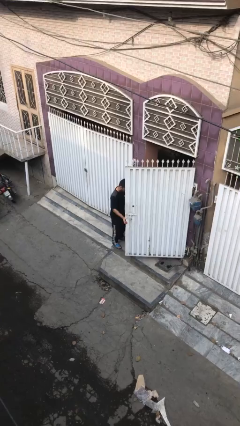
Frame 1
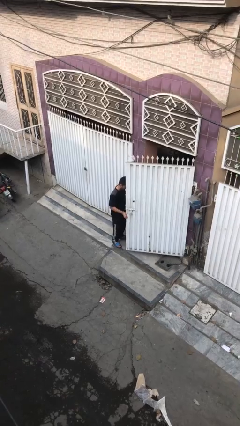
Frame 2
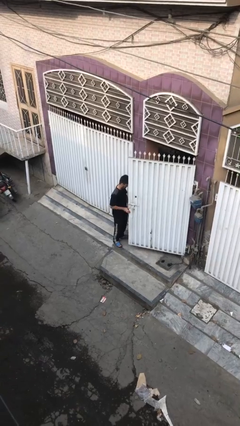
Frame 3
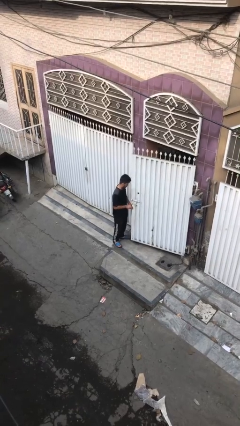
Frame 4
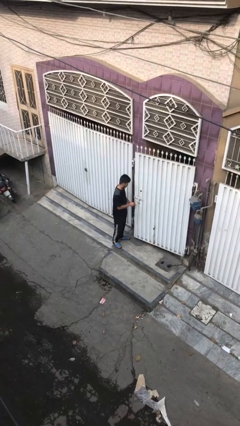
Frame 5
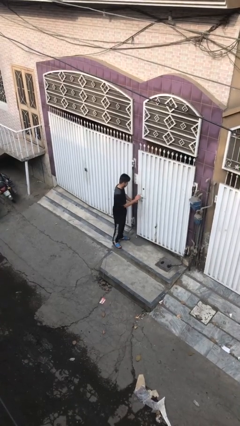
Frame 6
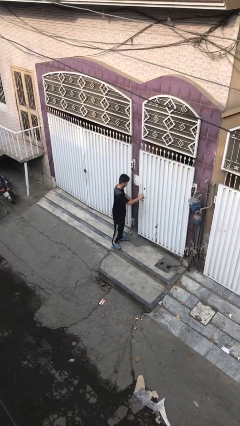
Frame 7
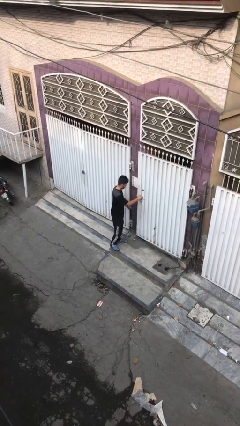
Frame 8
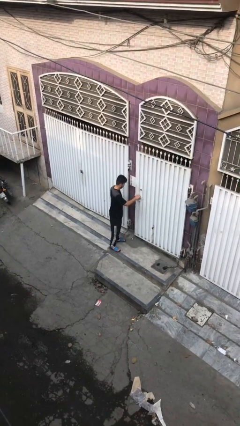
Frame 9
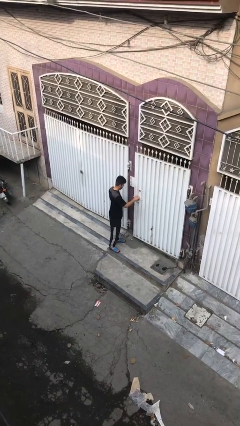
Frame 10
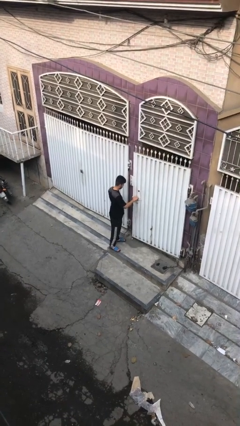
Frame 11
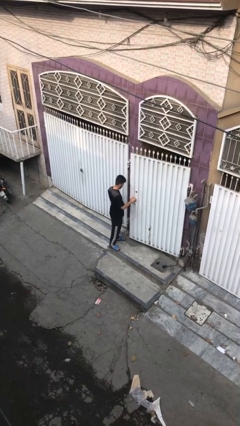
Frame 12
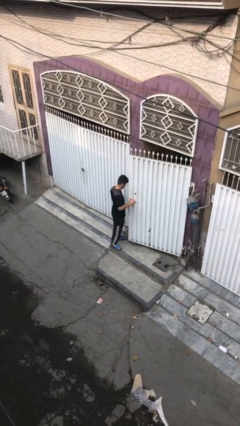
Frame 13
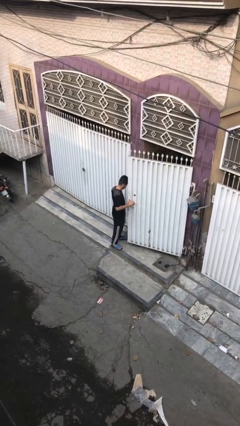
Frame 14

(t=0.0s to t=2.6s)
person closes facility door

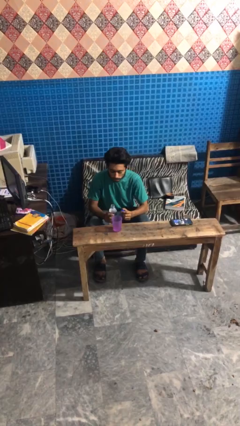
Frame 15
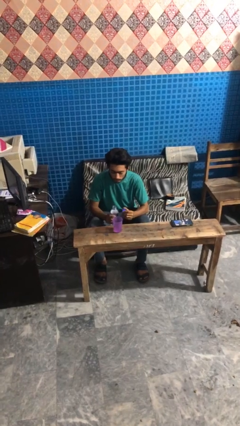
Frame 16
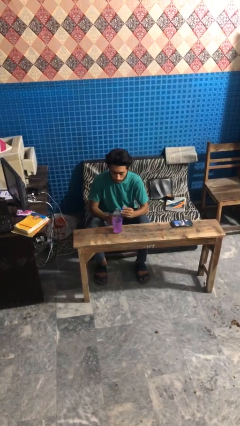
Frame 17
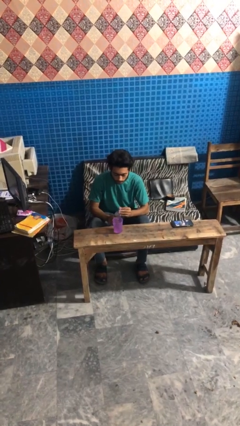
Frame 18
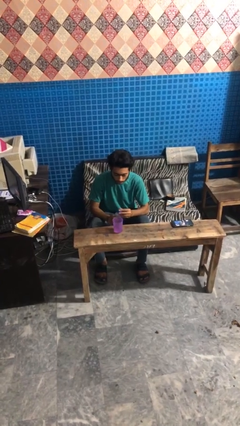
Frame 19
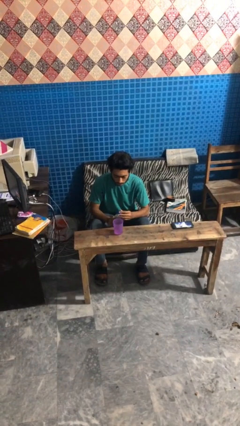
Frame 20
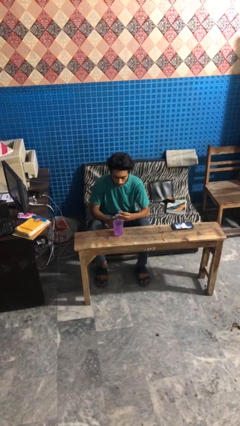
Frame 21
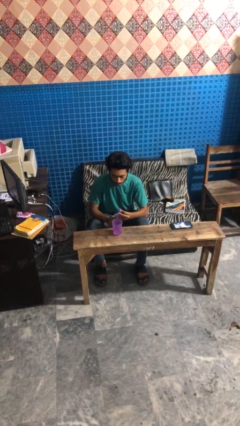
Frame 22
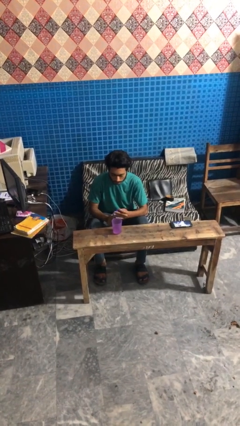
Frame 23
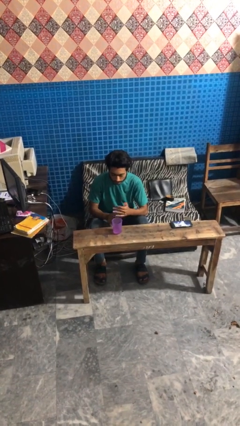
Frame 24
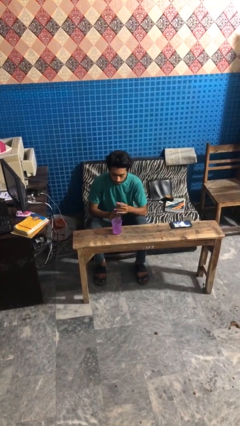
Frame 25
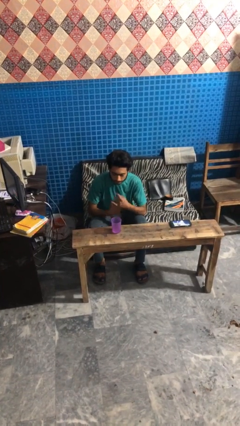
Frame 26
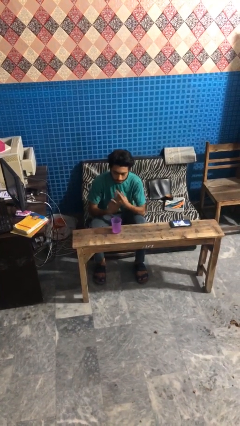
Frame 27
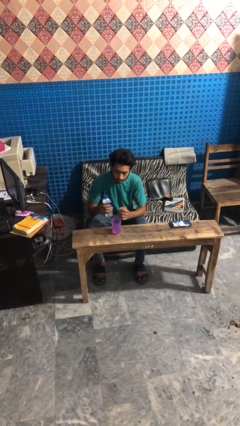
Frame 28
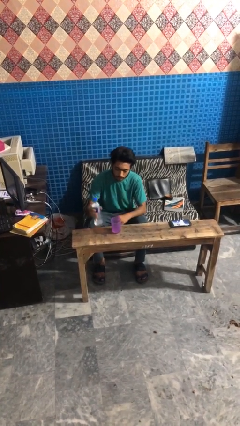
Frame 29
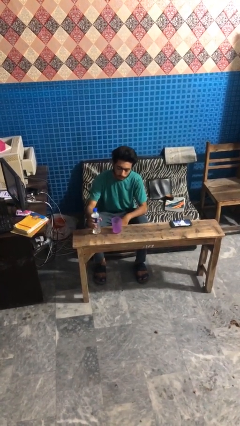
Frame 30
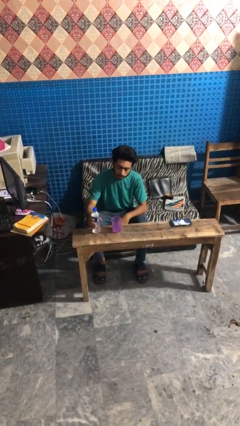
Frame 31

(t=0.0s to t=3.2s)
person screws lid to bottle

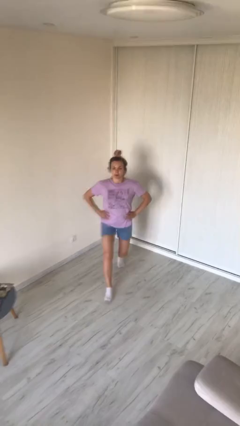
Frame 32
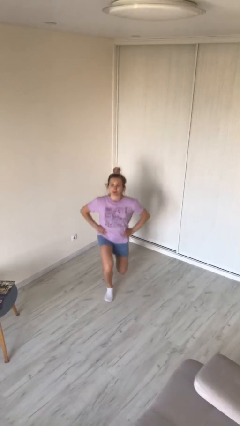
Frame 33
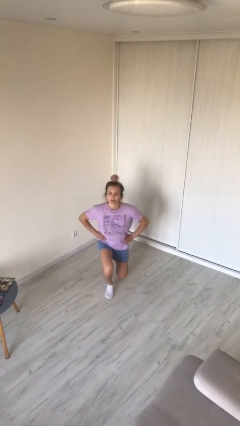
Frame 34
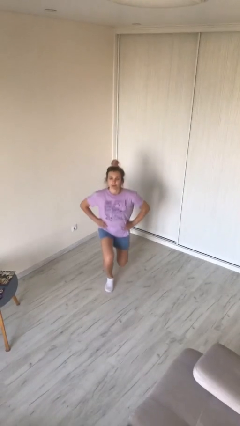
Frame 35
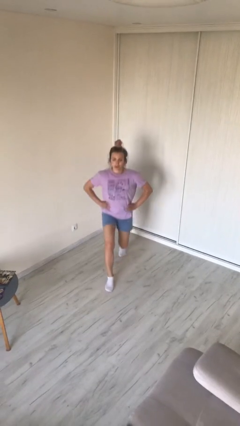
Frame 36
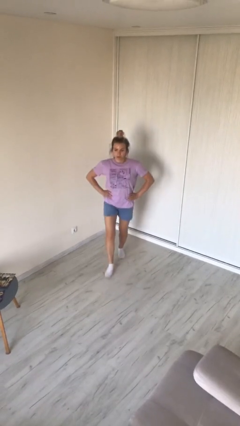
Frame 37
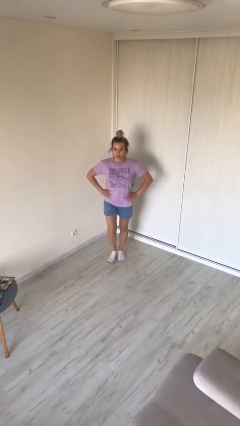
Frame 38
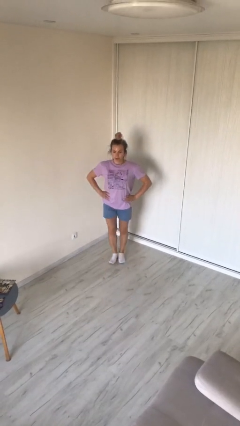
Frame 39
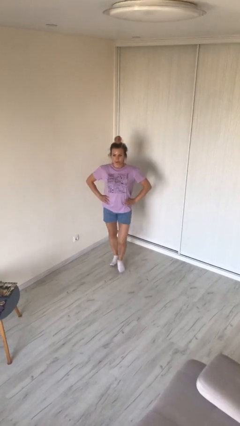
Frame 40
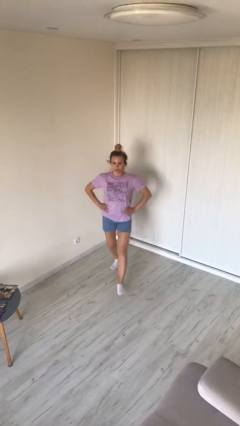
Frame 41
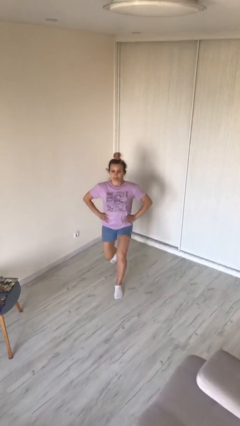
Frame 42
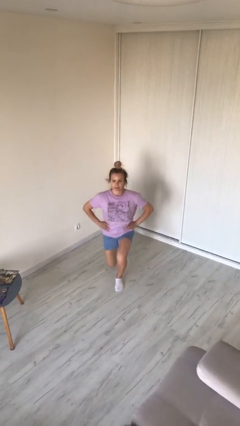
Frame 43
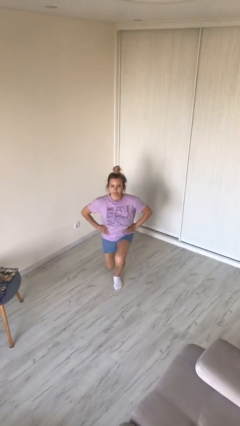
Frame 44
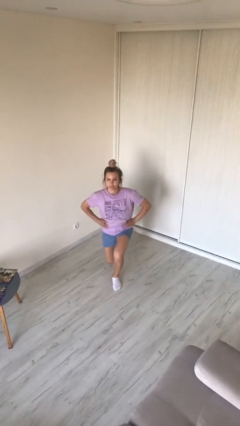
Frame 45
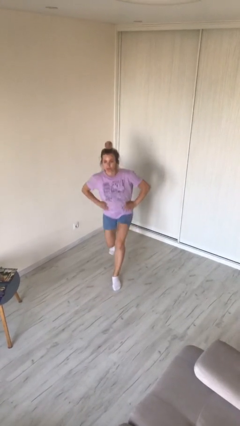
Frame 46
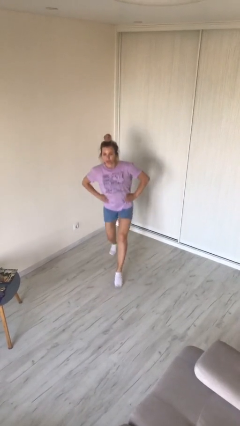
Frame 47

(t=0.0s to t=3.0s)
person exercises with lunges

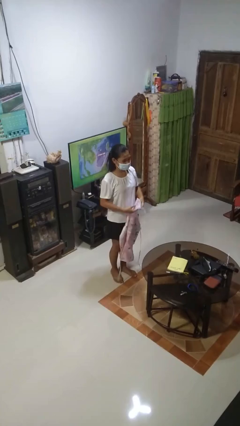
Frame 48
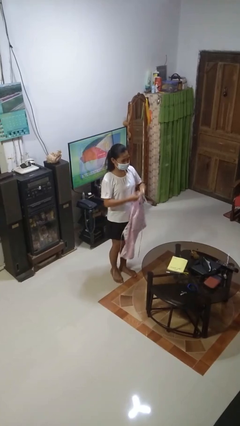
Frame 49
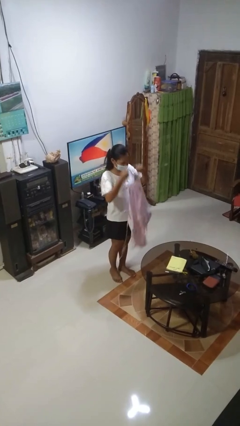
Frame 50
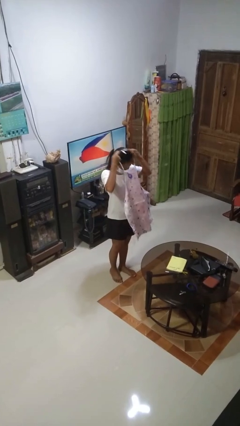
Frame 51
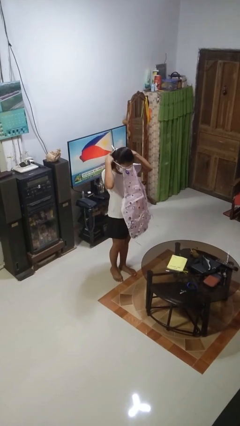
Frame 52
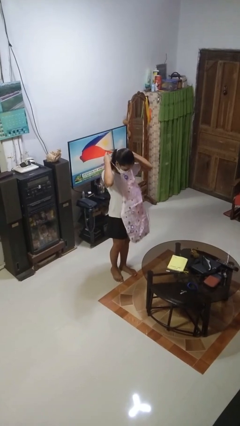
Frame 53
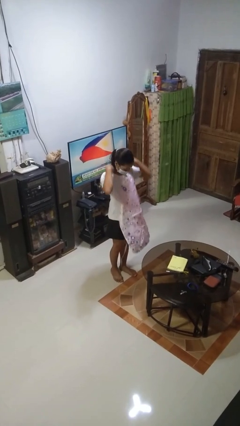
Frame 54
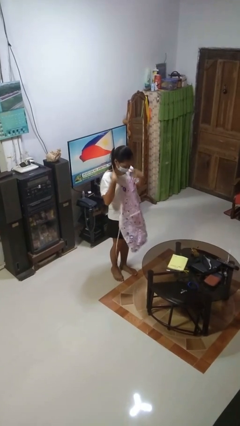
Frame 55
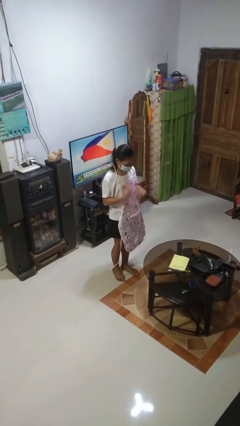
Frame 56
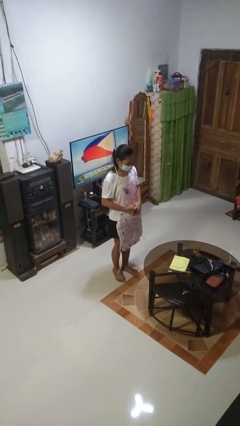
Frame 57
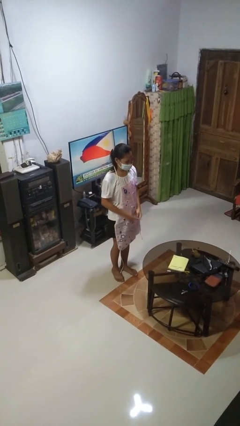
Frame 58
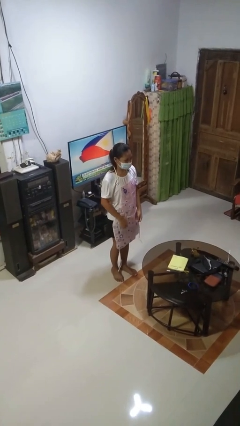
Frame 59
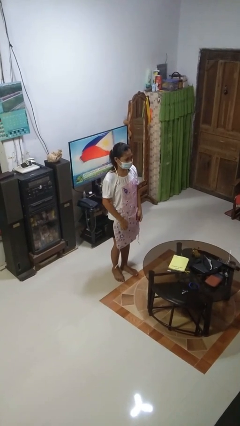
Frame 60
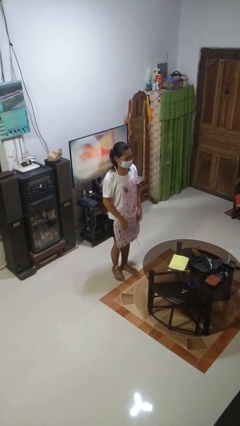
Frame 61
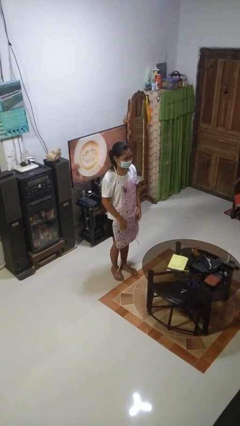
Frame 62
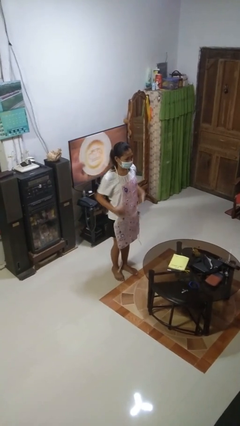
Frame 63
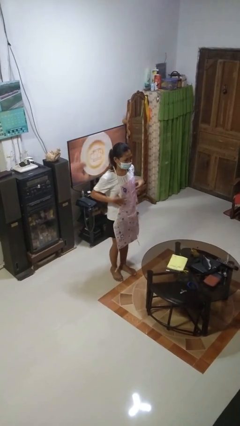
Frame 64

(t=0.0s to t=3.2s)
person puts on apron

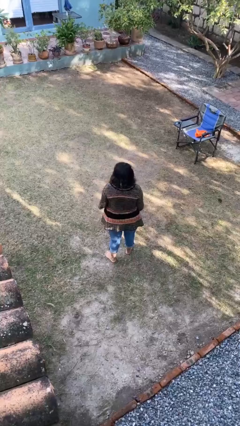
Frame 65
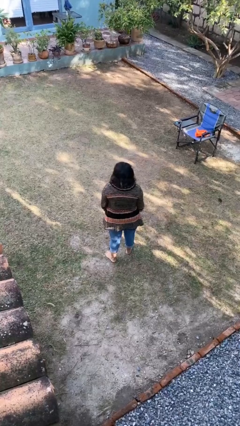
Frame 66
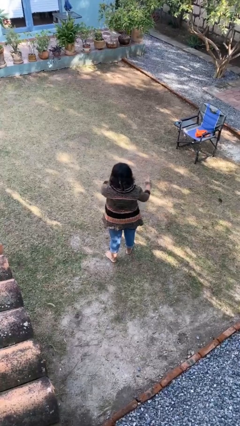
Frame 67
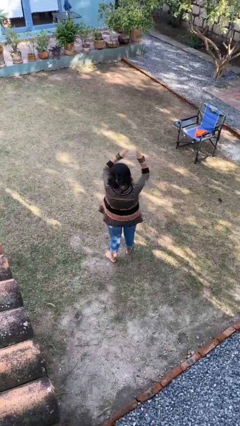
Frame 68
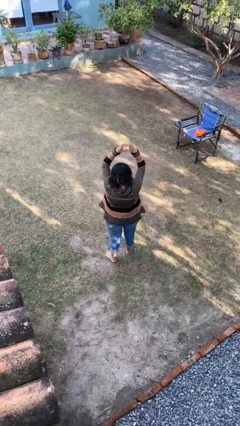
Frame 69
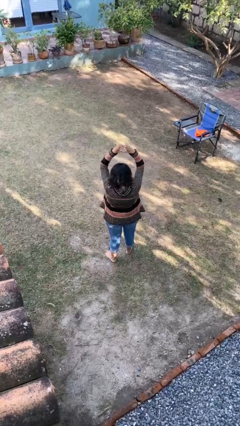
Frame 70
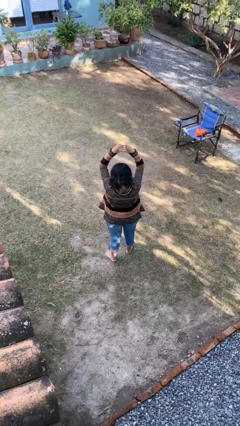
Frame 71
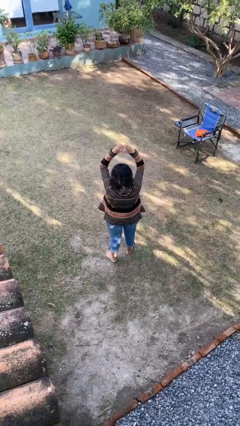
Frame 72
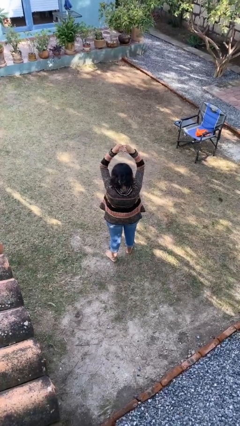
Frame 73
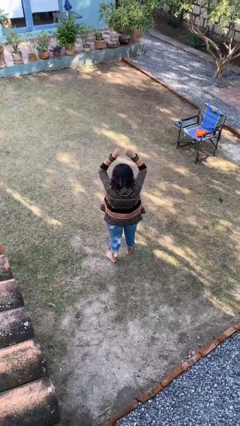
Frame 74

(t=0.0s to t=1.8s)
person gestures heart

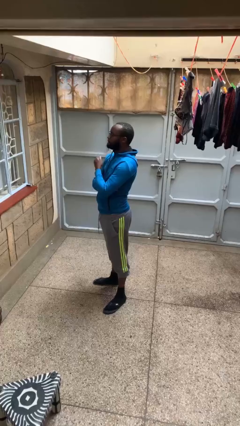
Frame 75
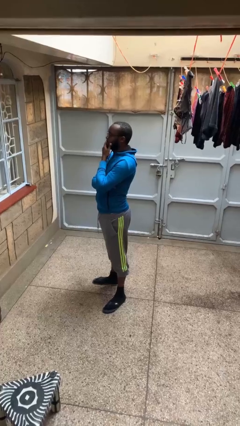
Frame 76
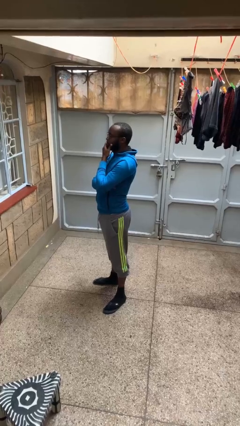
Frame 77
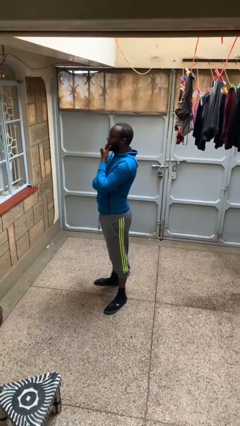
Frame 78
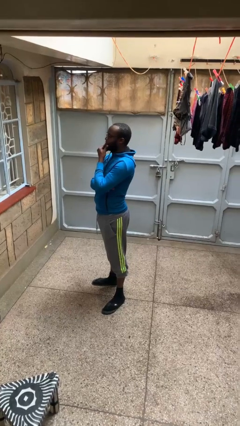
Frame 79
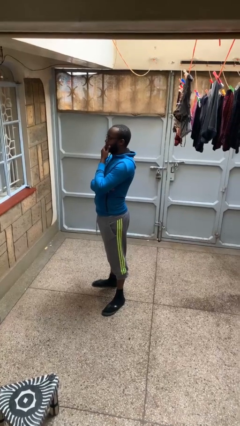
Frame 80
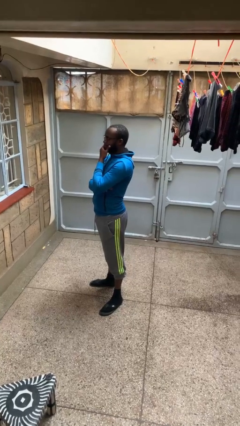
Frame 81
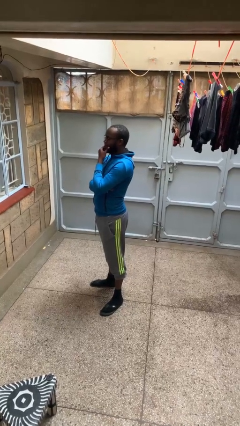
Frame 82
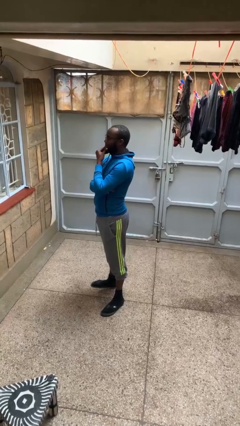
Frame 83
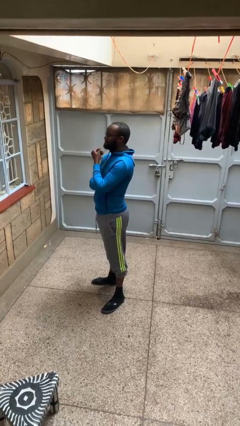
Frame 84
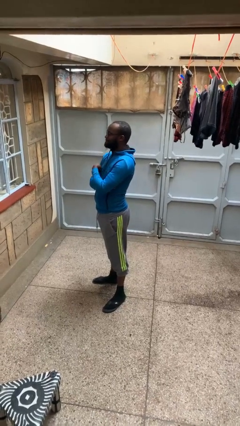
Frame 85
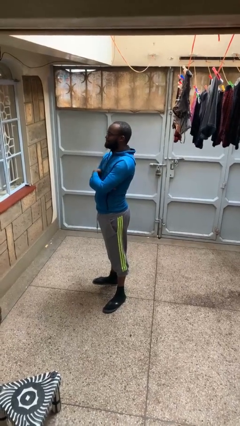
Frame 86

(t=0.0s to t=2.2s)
person strokes chin

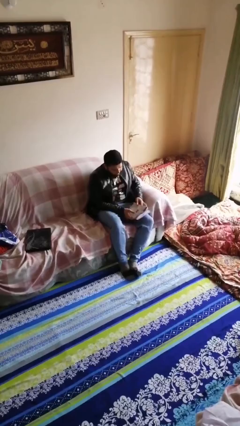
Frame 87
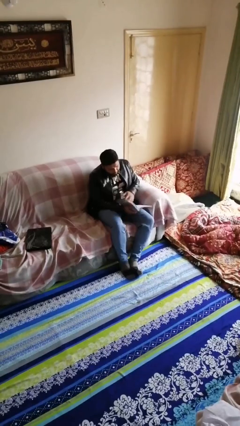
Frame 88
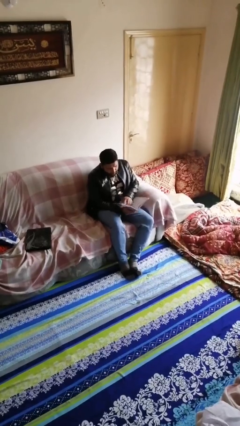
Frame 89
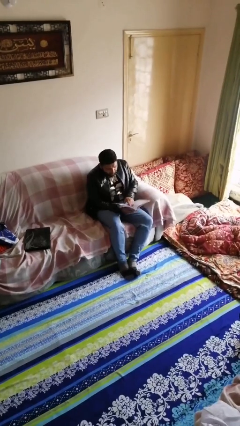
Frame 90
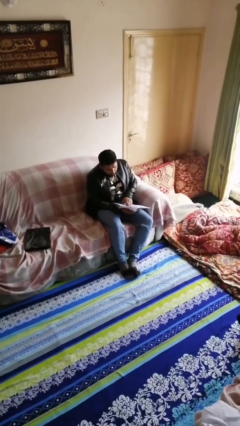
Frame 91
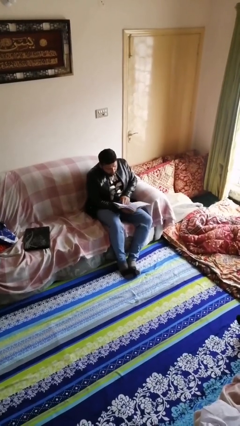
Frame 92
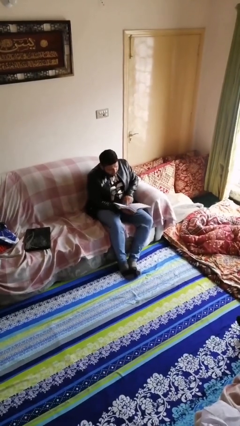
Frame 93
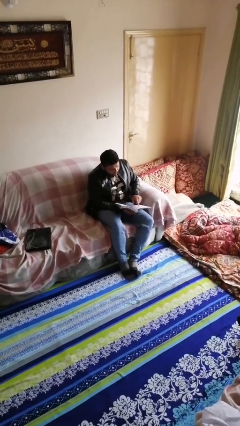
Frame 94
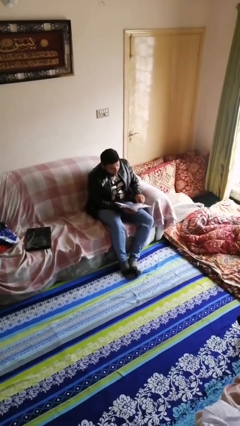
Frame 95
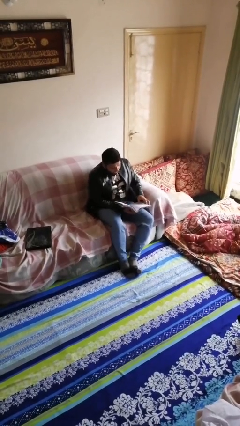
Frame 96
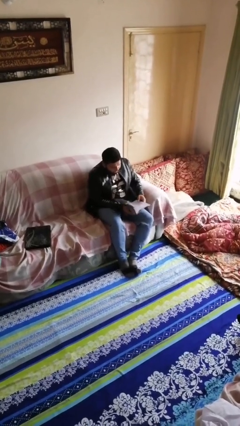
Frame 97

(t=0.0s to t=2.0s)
person reads document
